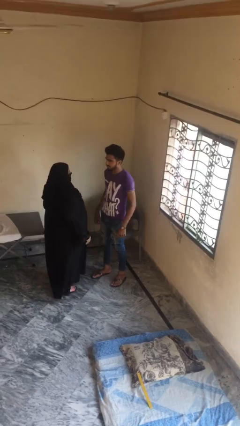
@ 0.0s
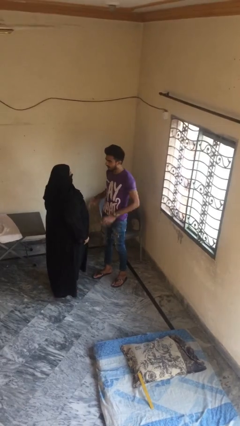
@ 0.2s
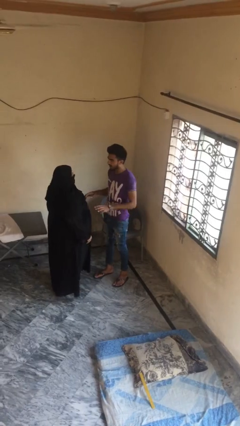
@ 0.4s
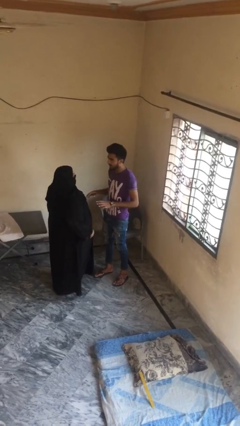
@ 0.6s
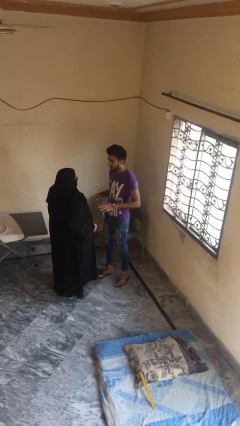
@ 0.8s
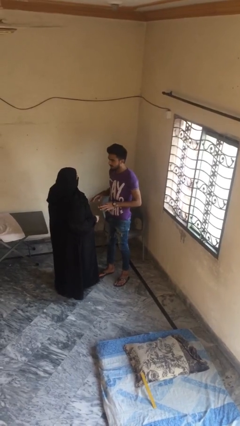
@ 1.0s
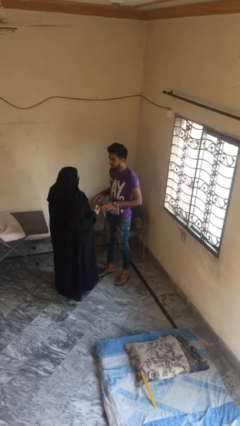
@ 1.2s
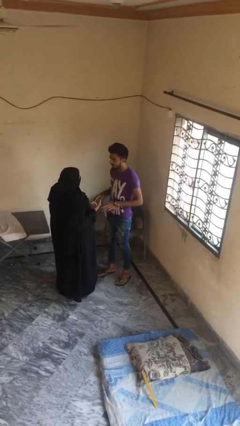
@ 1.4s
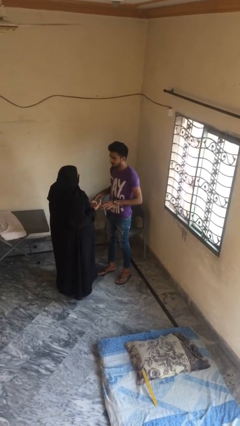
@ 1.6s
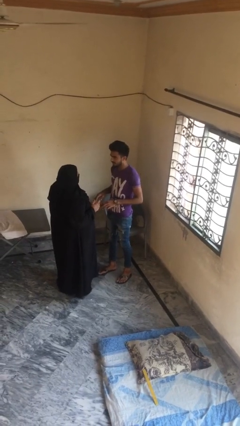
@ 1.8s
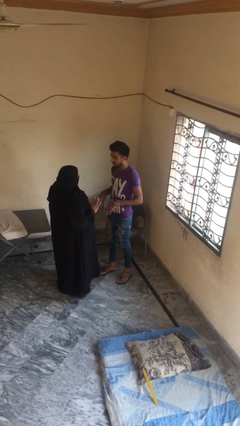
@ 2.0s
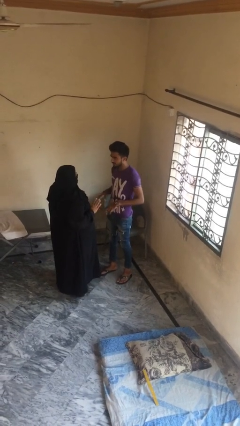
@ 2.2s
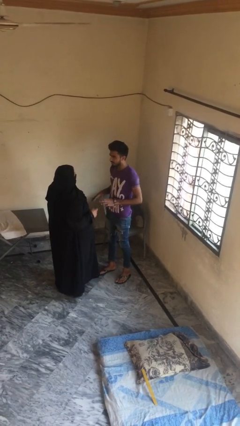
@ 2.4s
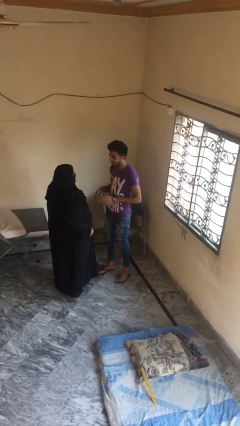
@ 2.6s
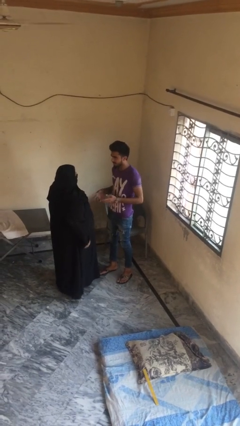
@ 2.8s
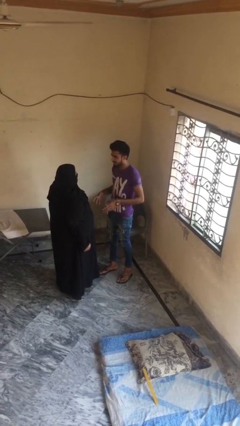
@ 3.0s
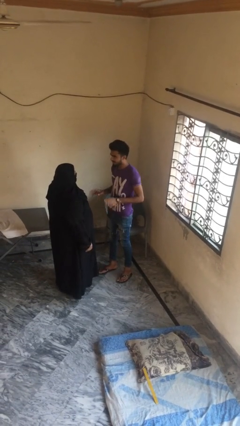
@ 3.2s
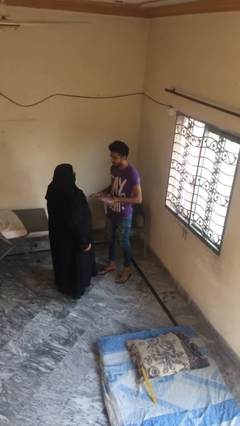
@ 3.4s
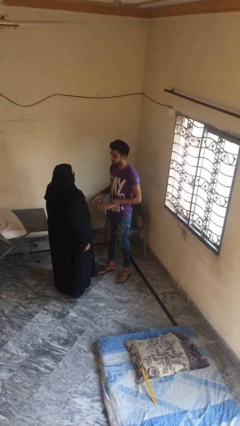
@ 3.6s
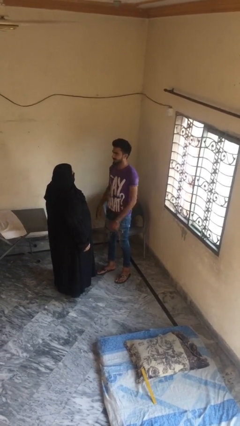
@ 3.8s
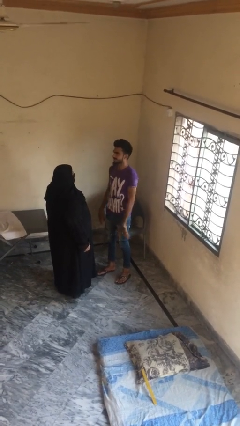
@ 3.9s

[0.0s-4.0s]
person talks to person

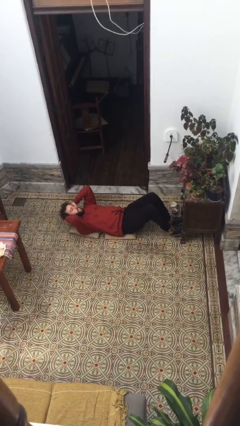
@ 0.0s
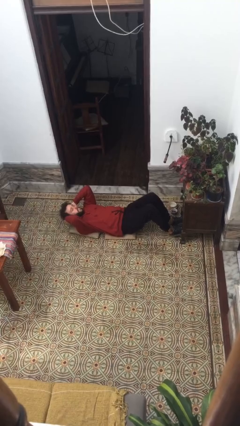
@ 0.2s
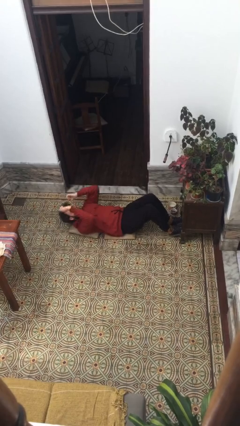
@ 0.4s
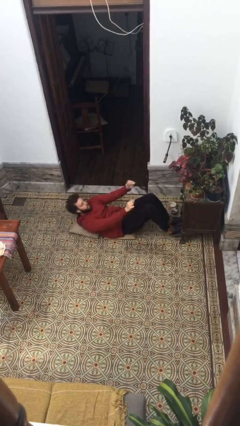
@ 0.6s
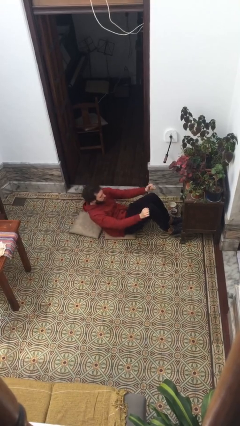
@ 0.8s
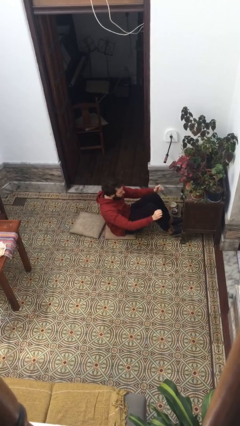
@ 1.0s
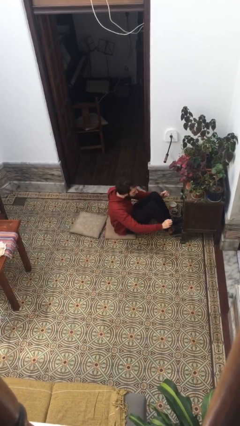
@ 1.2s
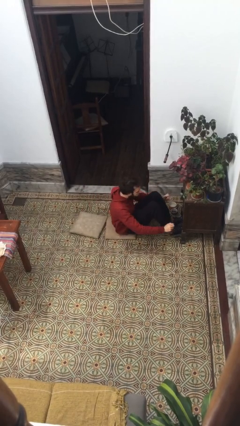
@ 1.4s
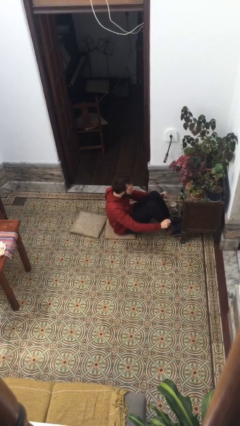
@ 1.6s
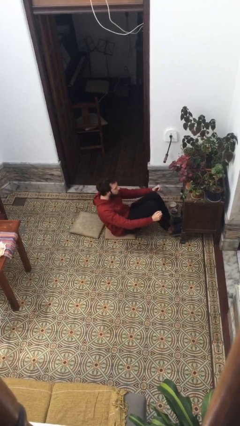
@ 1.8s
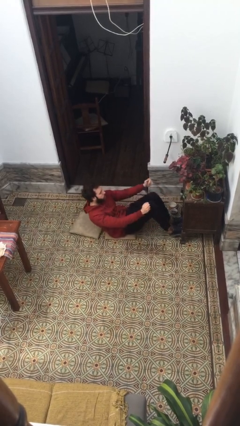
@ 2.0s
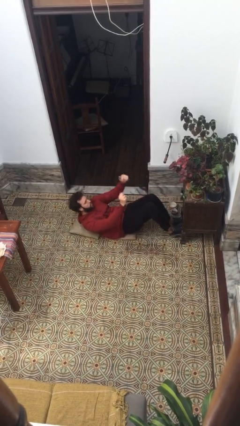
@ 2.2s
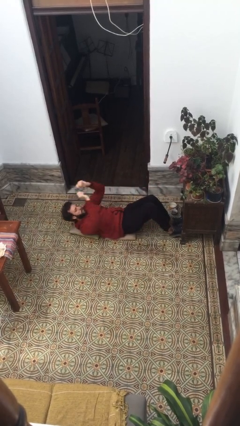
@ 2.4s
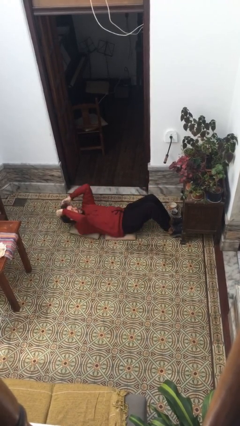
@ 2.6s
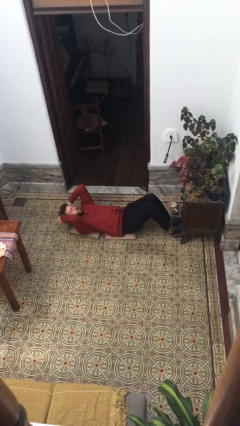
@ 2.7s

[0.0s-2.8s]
person exercises with situp

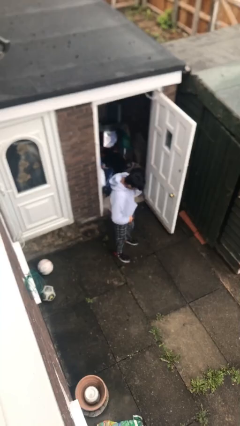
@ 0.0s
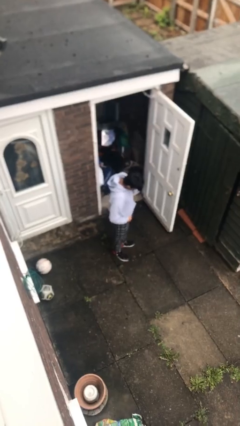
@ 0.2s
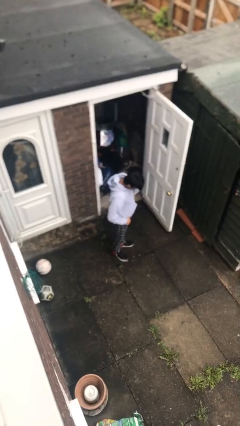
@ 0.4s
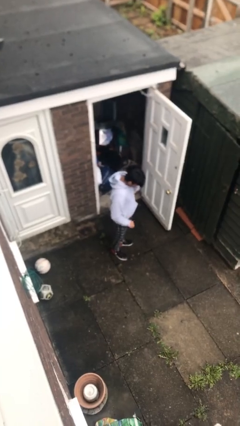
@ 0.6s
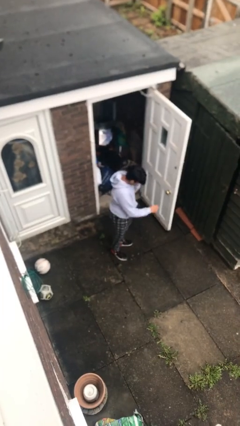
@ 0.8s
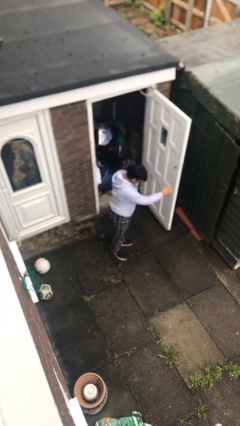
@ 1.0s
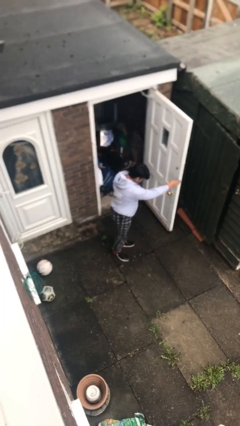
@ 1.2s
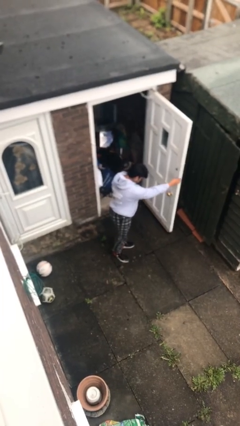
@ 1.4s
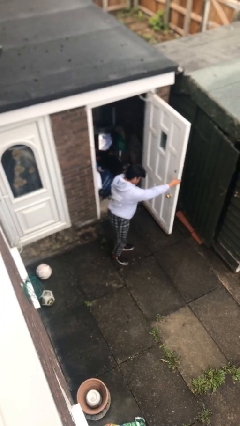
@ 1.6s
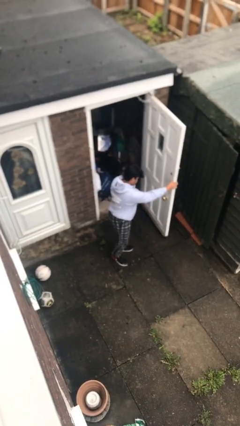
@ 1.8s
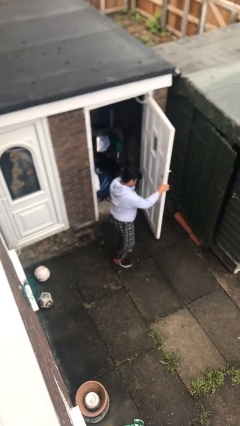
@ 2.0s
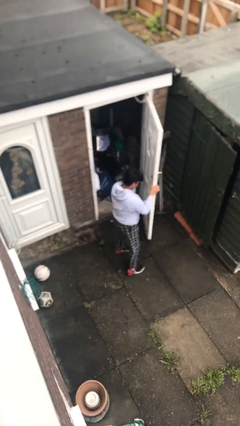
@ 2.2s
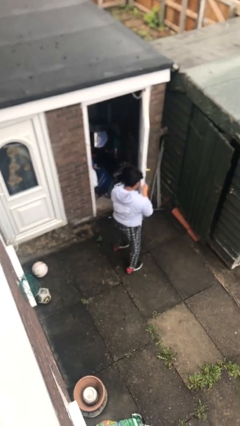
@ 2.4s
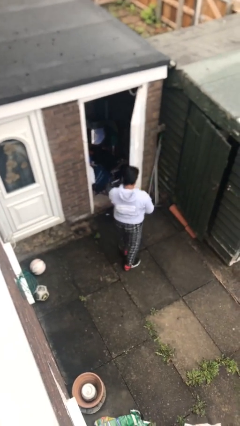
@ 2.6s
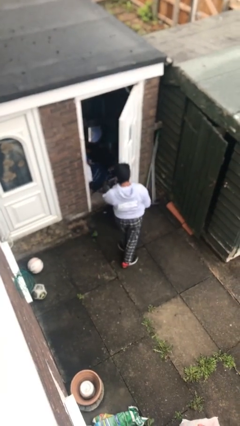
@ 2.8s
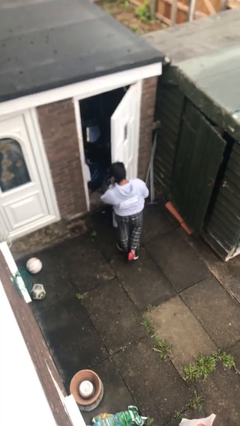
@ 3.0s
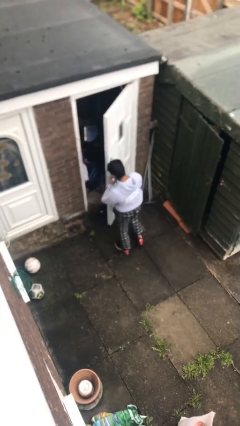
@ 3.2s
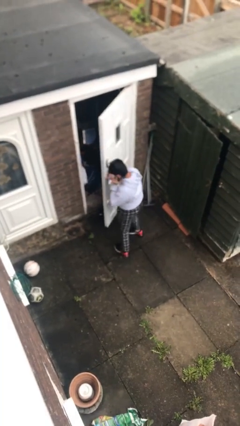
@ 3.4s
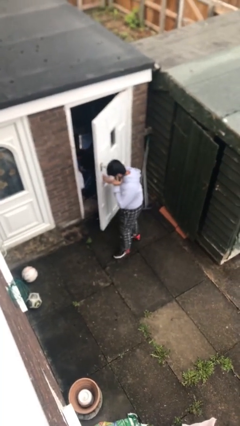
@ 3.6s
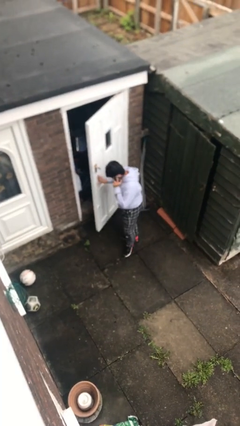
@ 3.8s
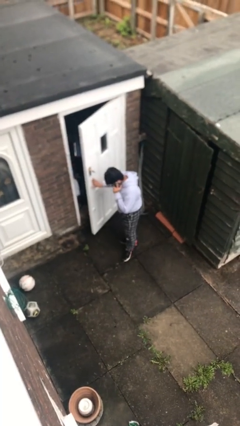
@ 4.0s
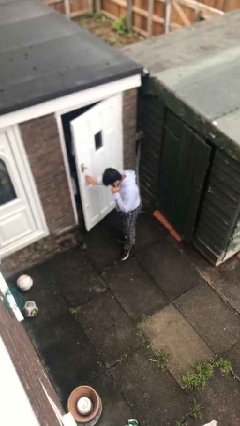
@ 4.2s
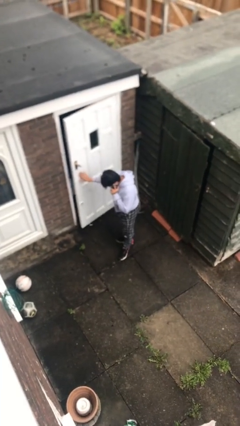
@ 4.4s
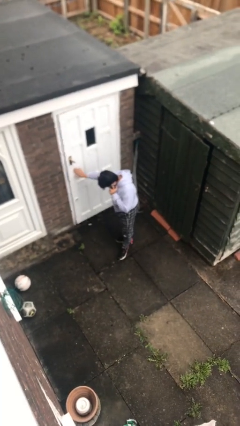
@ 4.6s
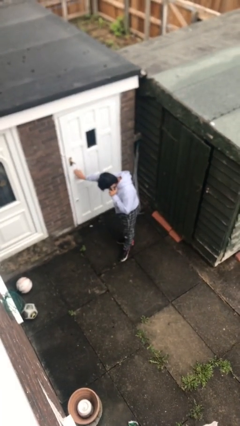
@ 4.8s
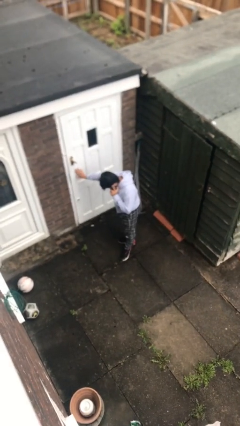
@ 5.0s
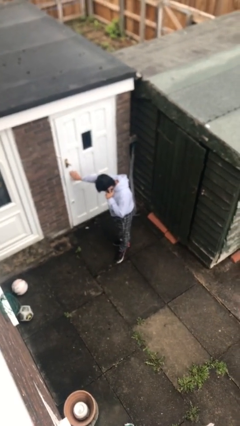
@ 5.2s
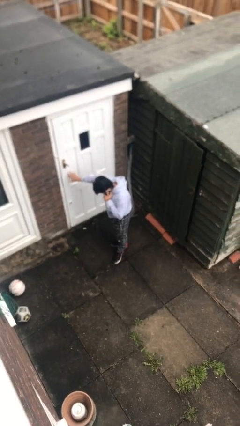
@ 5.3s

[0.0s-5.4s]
person closes facility door

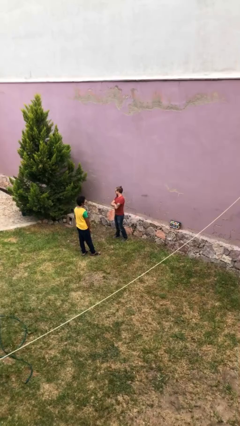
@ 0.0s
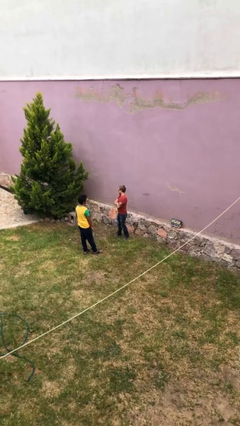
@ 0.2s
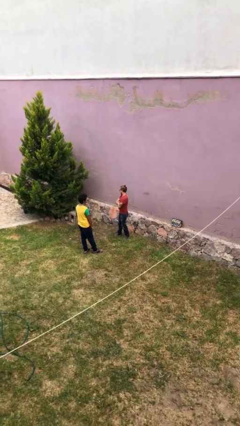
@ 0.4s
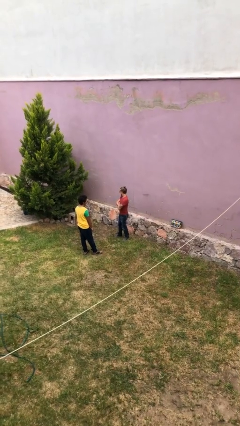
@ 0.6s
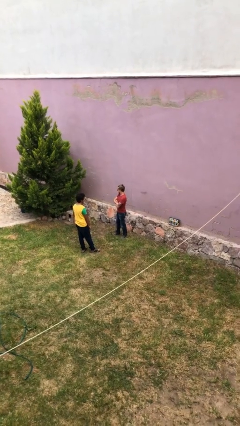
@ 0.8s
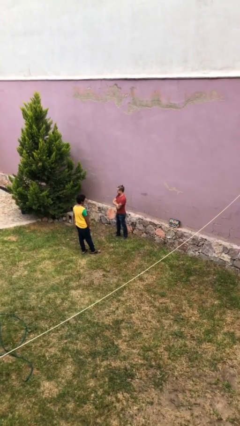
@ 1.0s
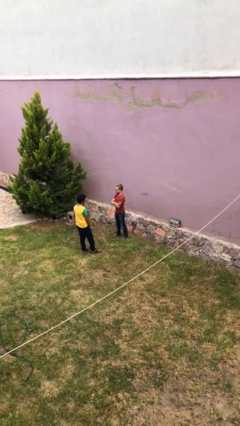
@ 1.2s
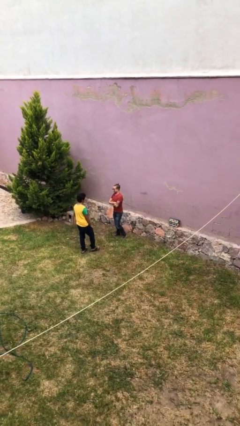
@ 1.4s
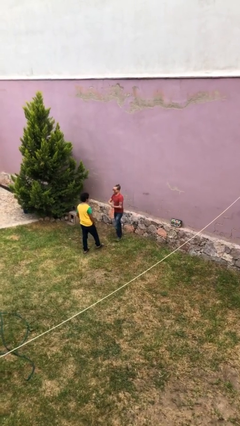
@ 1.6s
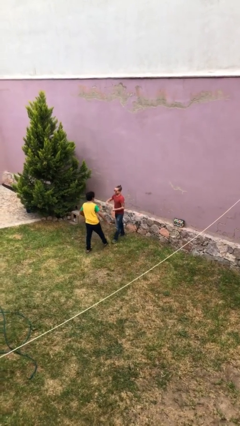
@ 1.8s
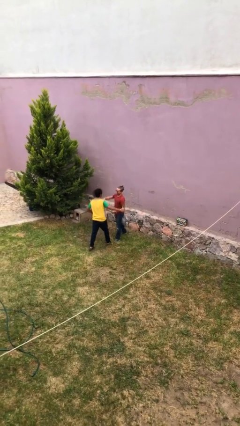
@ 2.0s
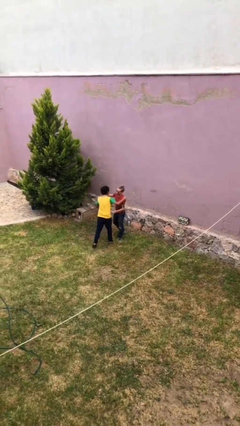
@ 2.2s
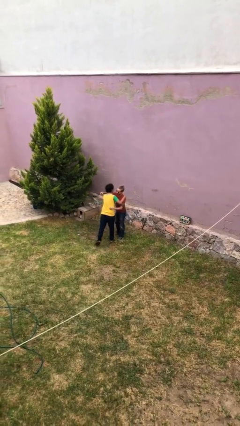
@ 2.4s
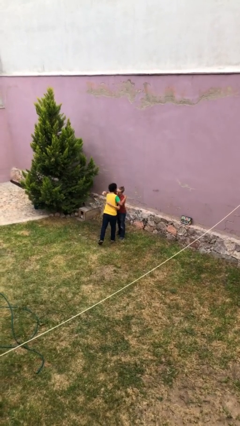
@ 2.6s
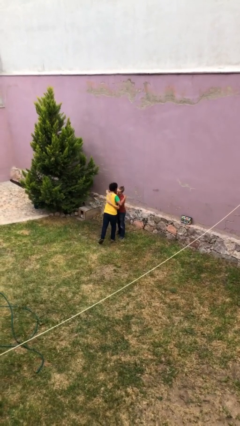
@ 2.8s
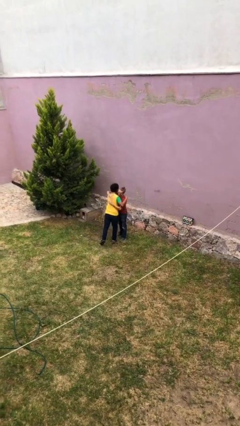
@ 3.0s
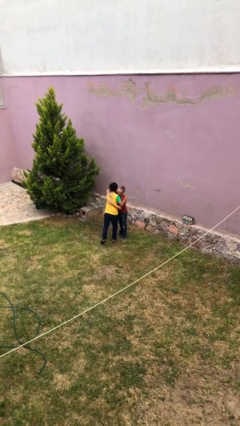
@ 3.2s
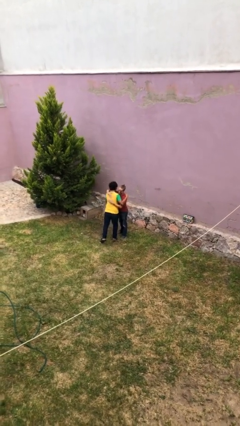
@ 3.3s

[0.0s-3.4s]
person embraces person

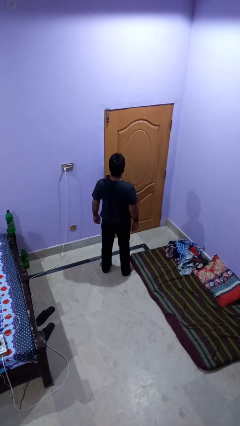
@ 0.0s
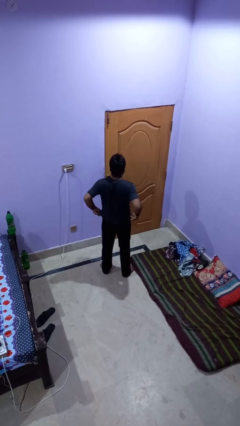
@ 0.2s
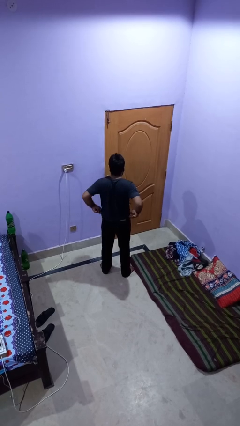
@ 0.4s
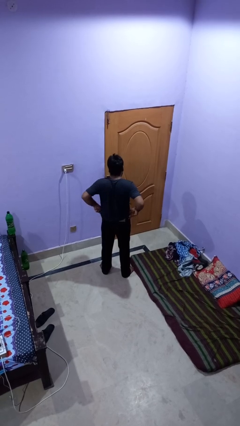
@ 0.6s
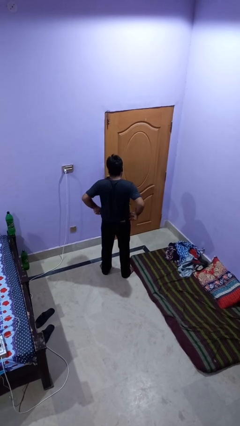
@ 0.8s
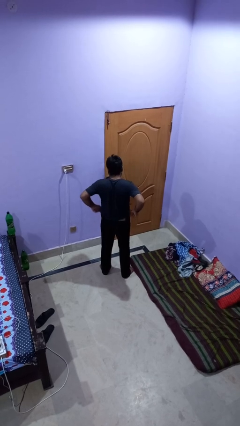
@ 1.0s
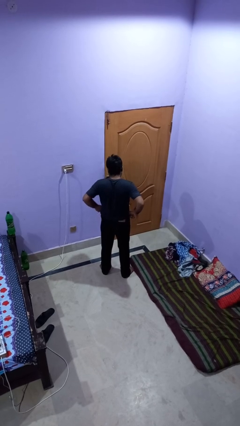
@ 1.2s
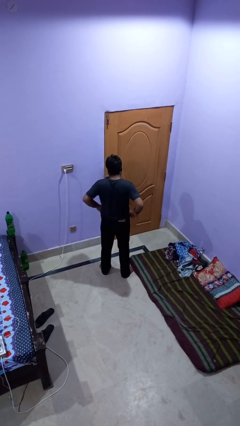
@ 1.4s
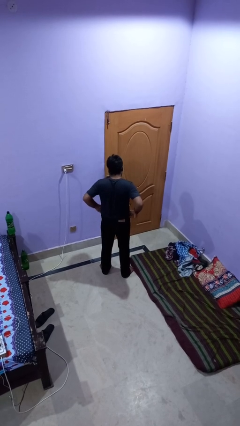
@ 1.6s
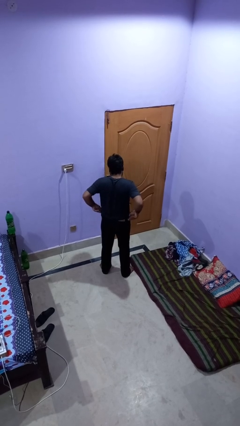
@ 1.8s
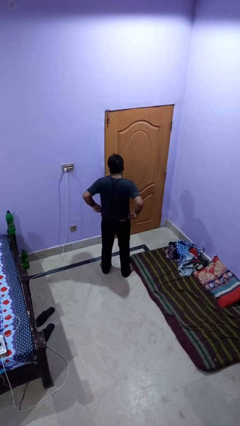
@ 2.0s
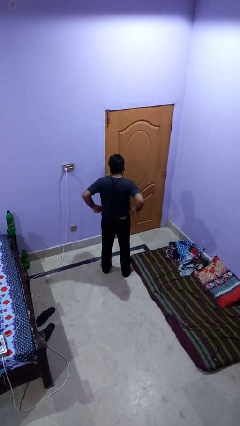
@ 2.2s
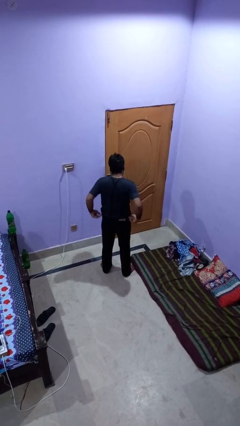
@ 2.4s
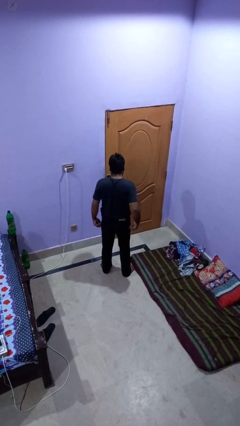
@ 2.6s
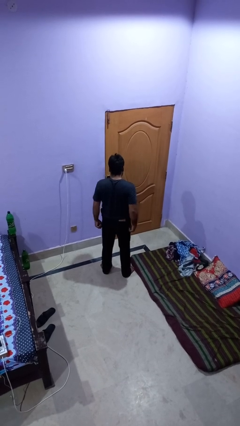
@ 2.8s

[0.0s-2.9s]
person hikes up pants
